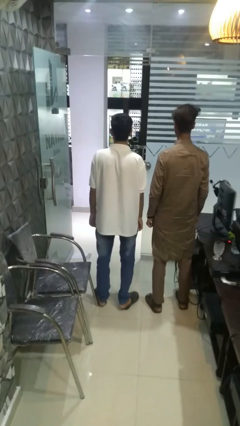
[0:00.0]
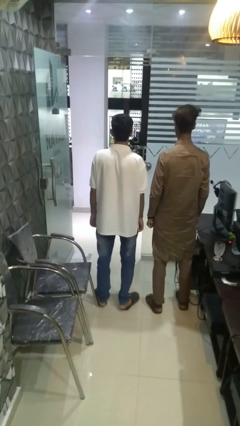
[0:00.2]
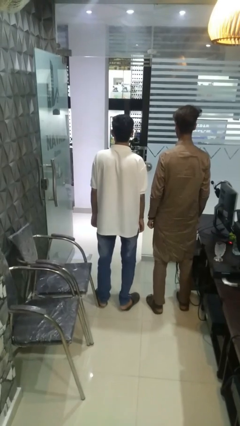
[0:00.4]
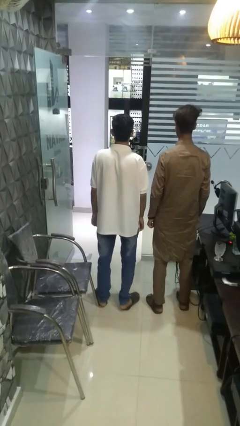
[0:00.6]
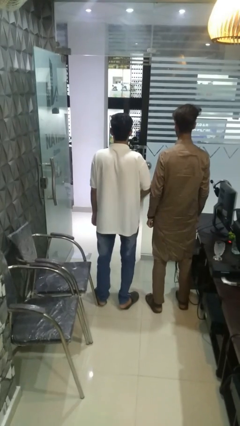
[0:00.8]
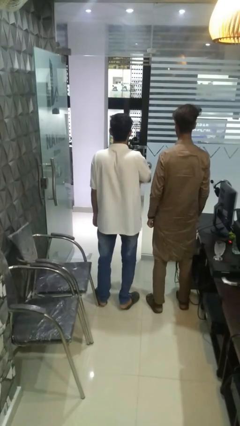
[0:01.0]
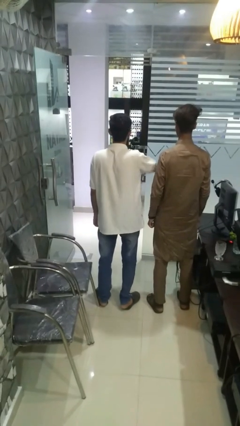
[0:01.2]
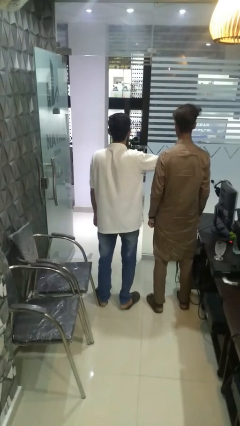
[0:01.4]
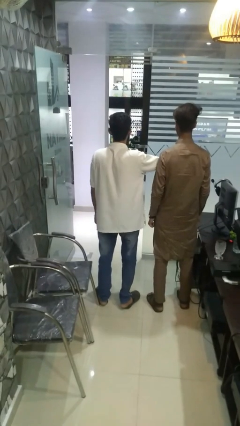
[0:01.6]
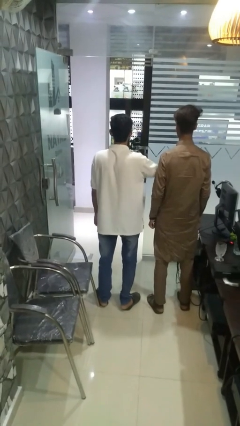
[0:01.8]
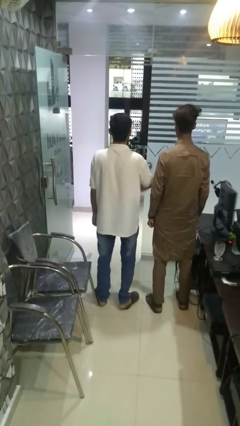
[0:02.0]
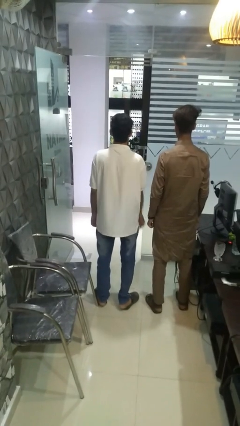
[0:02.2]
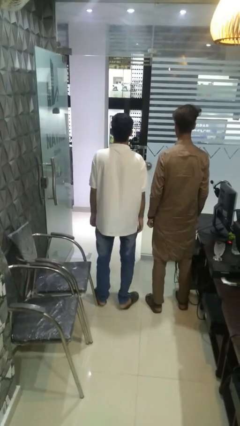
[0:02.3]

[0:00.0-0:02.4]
person nudges person with elbow

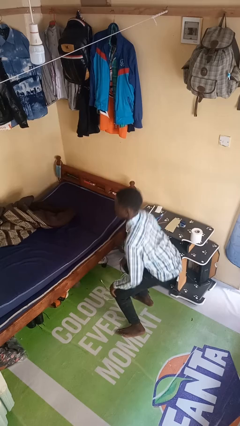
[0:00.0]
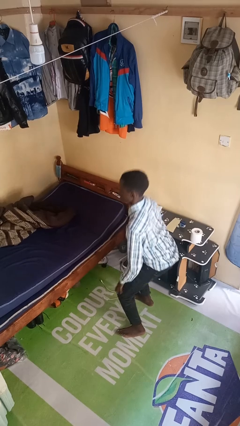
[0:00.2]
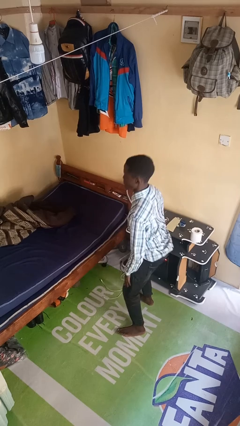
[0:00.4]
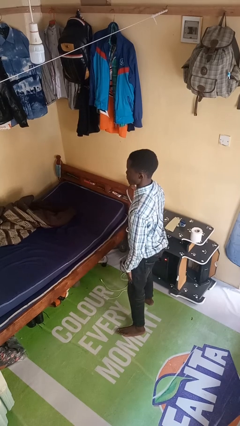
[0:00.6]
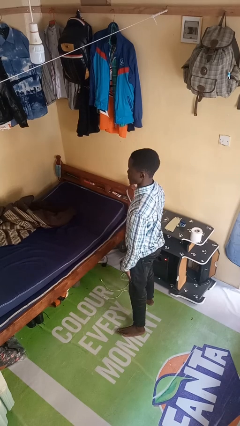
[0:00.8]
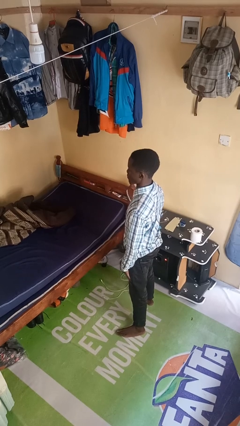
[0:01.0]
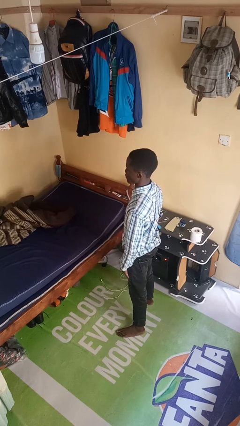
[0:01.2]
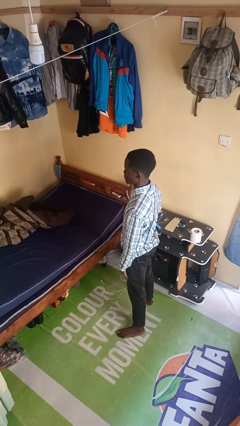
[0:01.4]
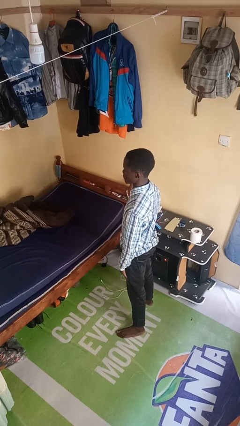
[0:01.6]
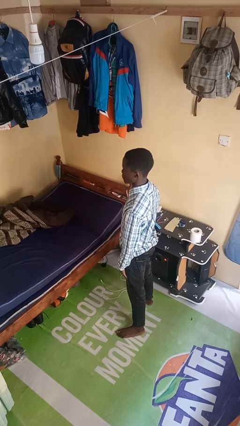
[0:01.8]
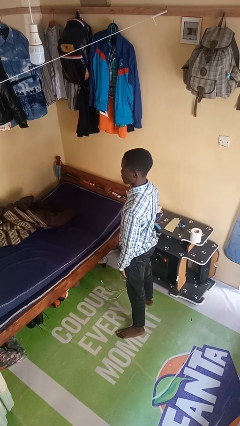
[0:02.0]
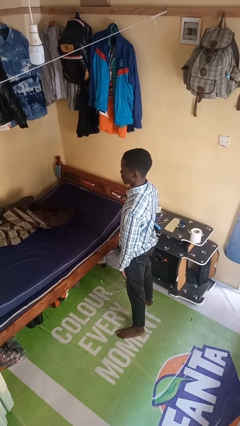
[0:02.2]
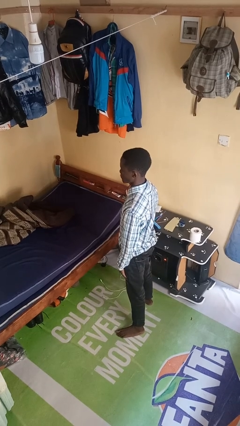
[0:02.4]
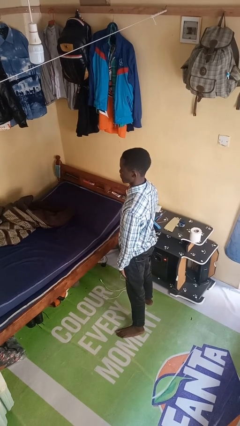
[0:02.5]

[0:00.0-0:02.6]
person stands up

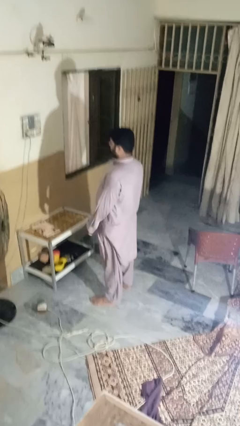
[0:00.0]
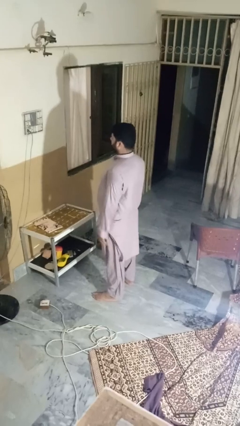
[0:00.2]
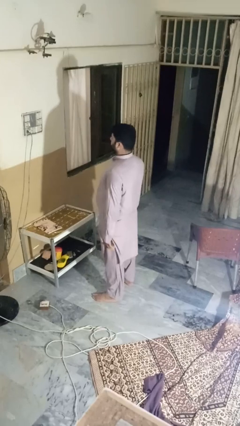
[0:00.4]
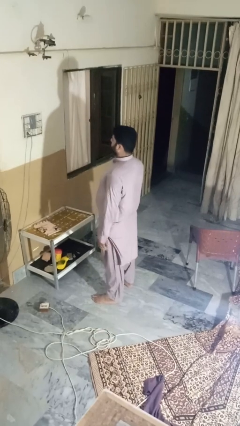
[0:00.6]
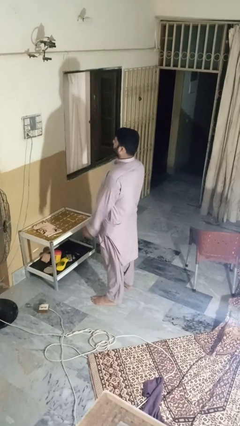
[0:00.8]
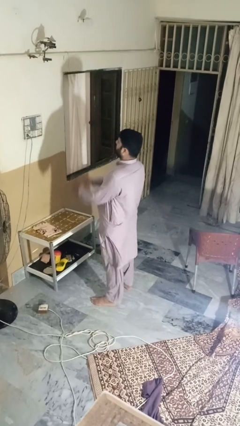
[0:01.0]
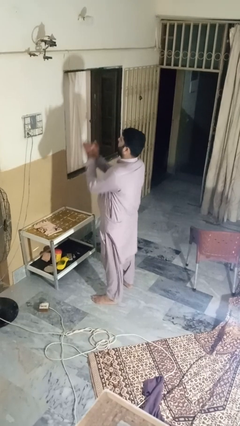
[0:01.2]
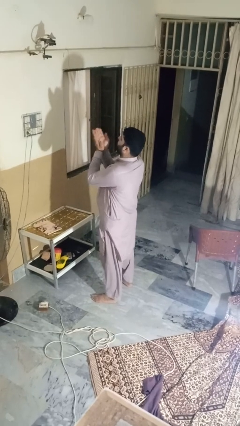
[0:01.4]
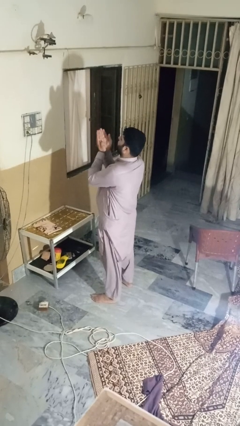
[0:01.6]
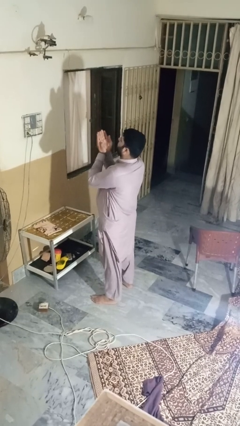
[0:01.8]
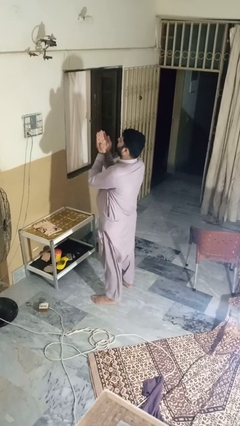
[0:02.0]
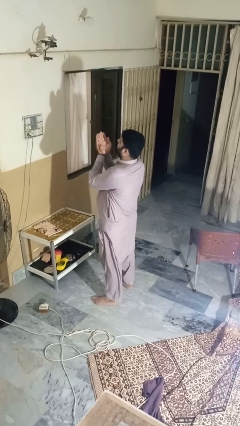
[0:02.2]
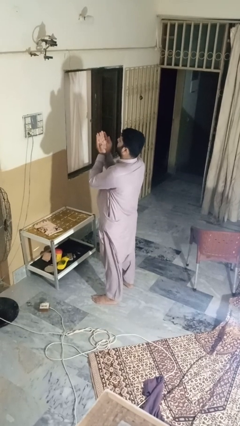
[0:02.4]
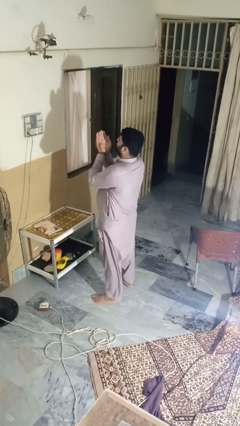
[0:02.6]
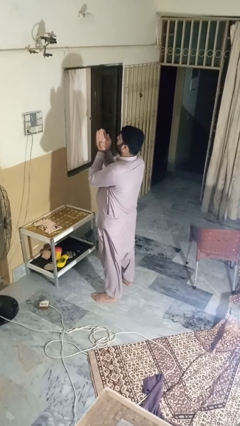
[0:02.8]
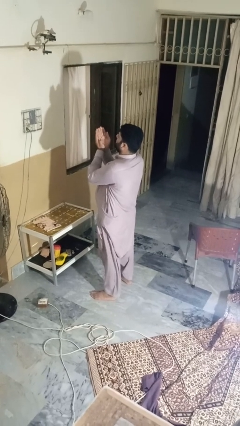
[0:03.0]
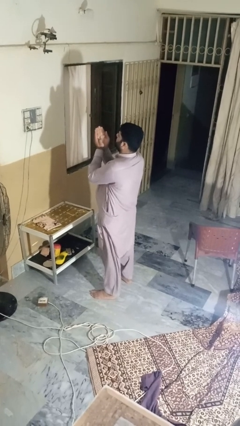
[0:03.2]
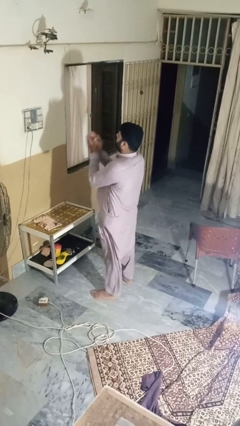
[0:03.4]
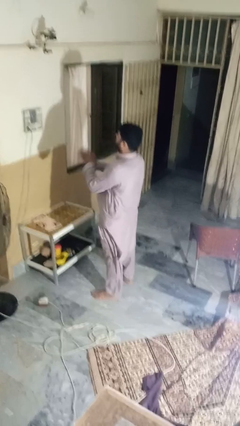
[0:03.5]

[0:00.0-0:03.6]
person prays

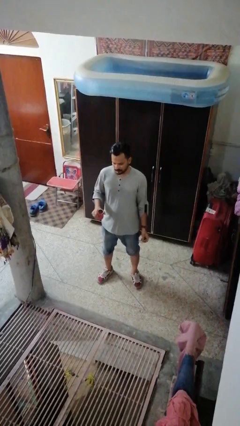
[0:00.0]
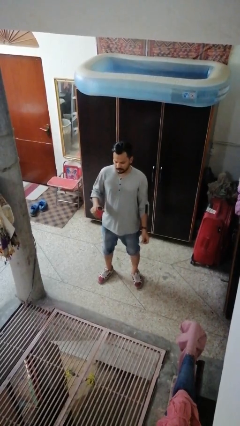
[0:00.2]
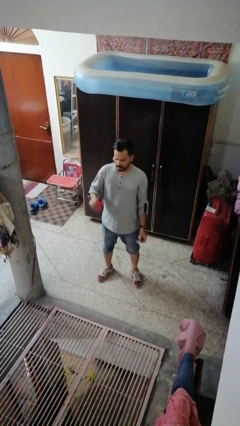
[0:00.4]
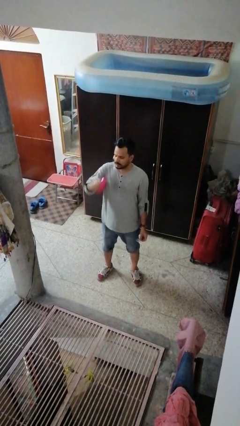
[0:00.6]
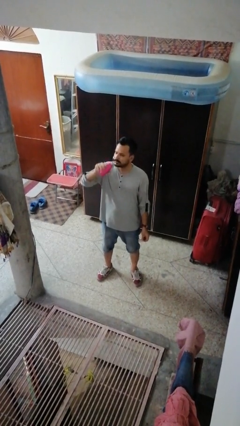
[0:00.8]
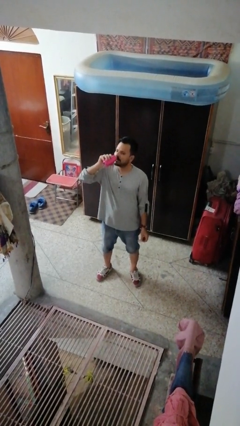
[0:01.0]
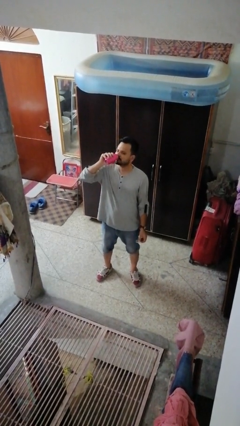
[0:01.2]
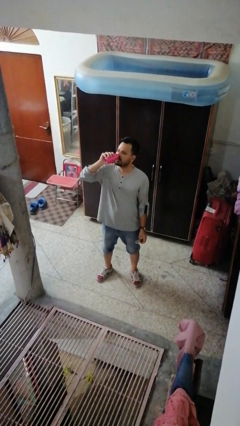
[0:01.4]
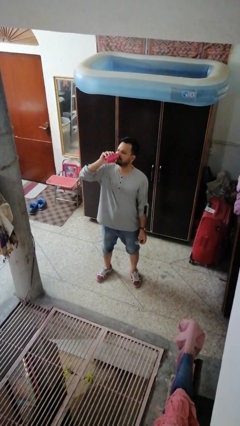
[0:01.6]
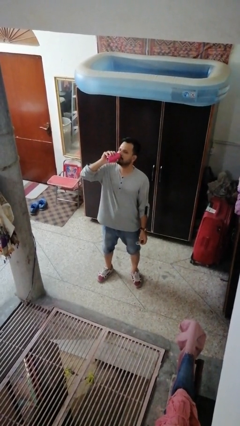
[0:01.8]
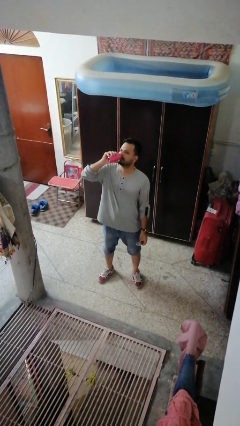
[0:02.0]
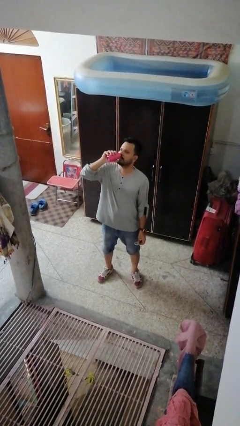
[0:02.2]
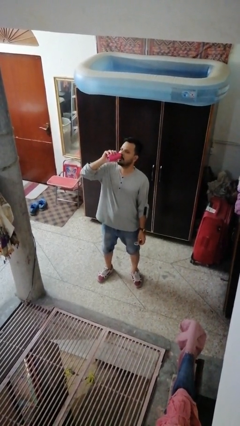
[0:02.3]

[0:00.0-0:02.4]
person drinks from beverage can

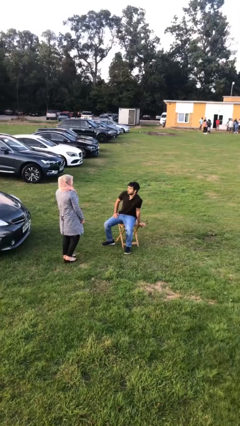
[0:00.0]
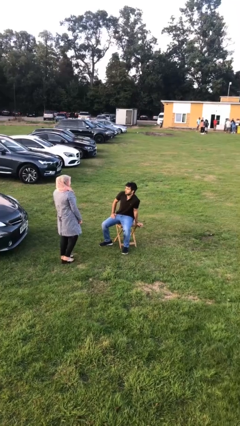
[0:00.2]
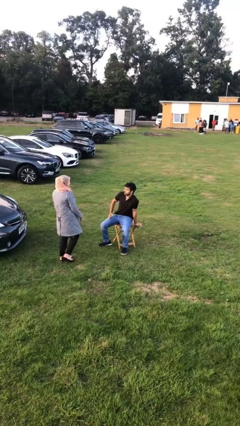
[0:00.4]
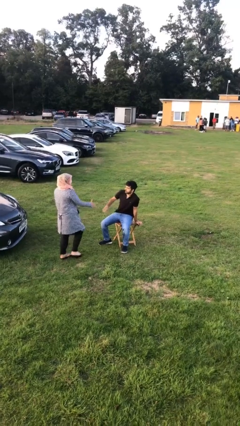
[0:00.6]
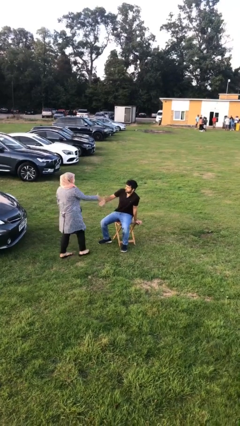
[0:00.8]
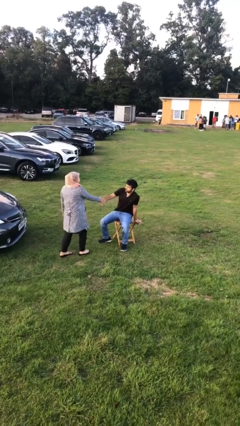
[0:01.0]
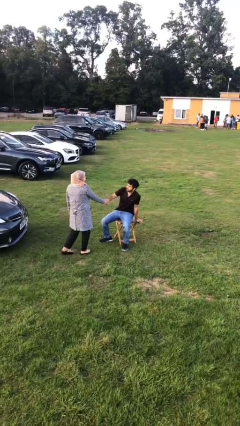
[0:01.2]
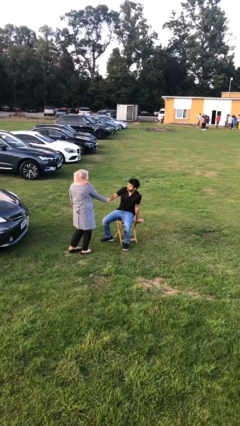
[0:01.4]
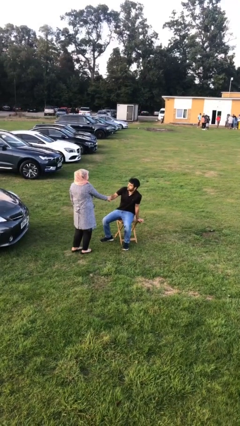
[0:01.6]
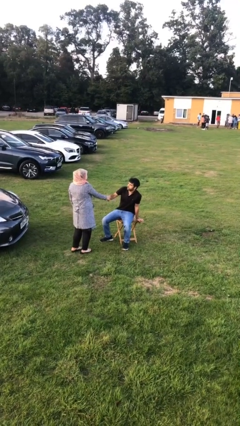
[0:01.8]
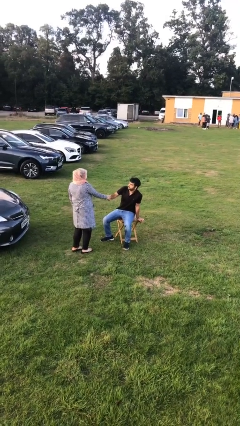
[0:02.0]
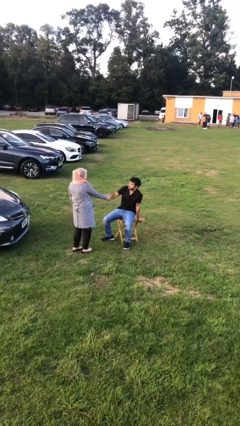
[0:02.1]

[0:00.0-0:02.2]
person shakes hand

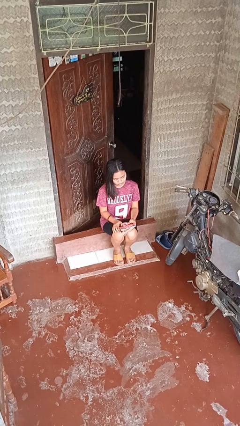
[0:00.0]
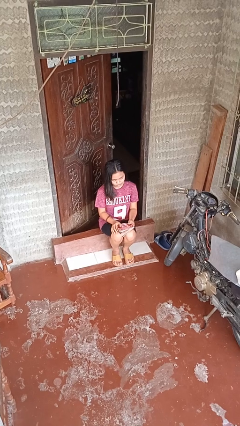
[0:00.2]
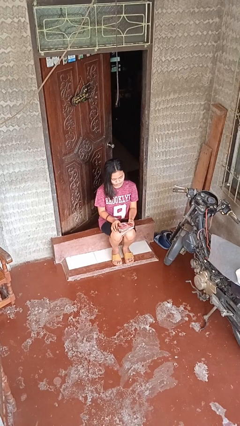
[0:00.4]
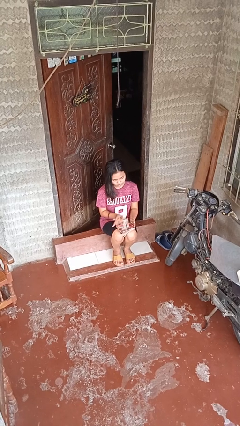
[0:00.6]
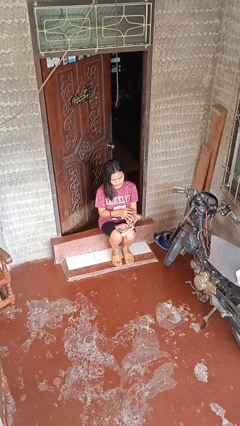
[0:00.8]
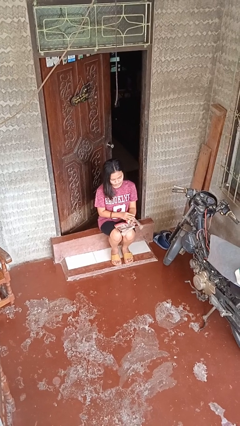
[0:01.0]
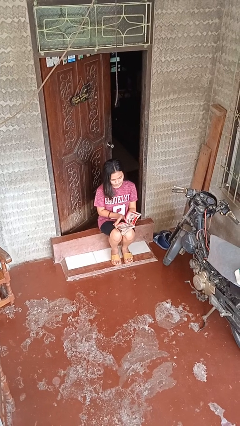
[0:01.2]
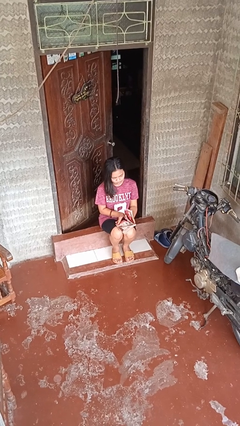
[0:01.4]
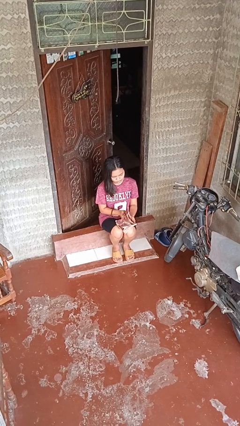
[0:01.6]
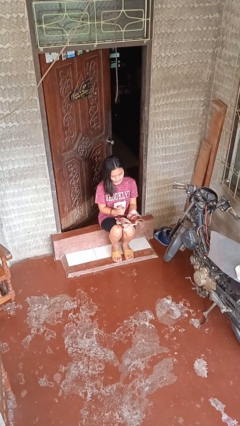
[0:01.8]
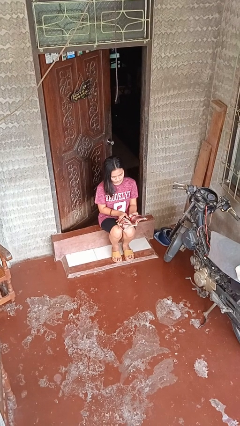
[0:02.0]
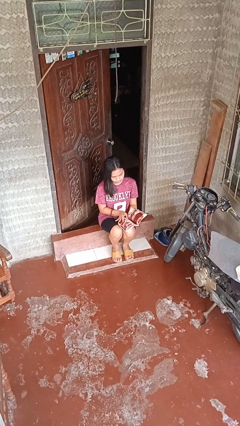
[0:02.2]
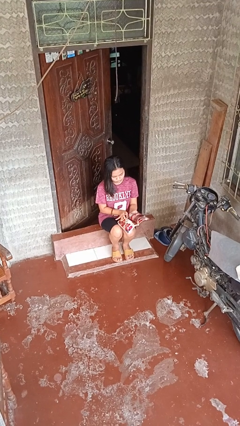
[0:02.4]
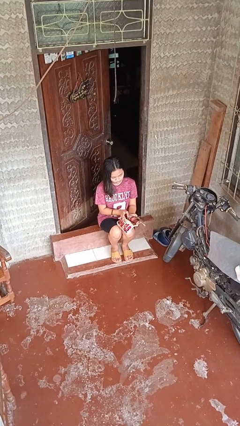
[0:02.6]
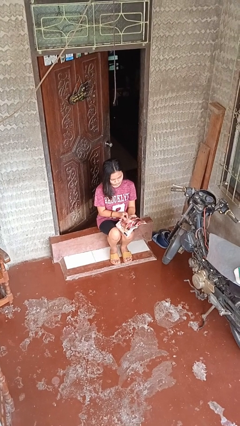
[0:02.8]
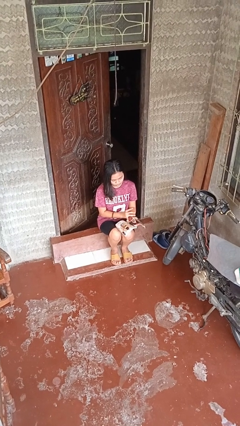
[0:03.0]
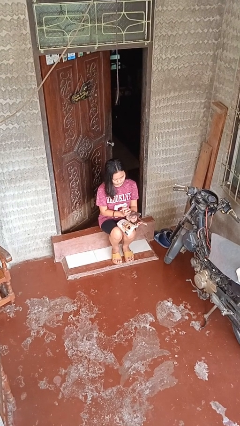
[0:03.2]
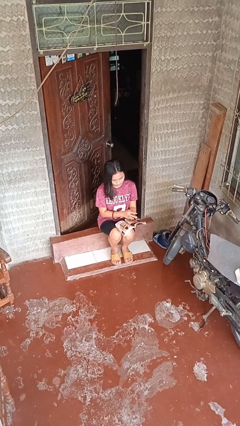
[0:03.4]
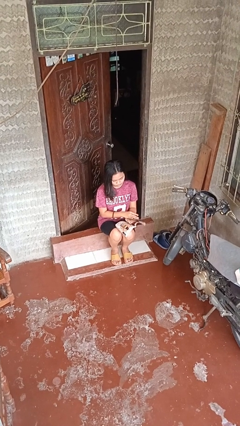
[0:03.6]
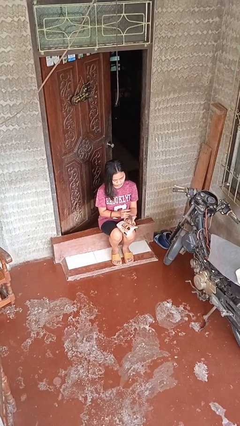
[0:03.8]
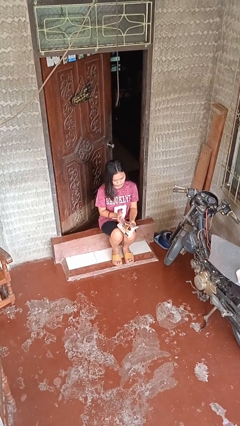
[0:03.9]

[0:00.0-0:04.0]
person reads magazine

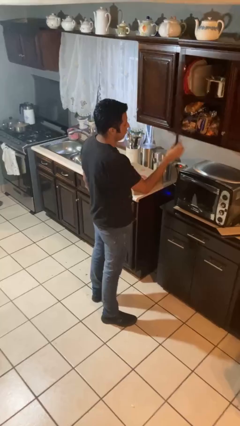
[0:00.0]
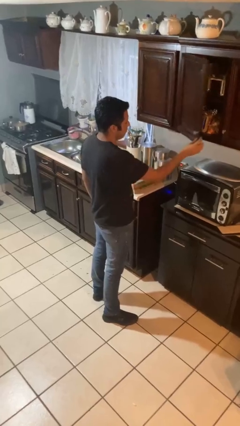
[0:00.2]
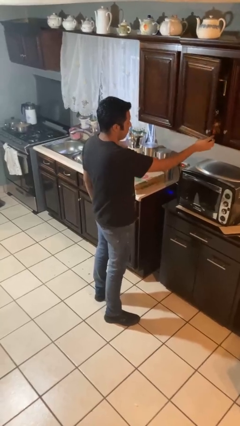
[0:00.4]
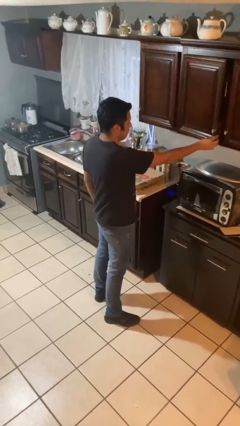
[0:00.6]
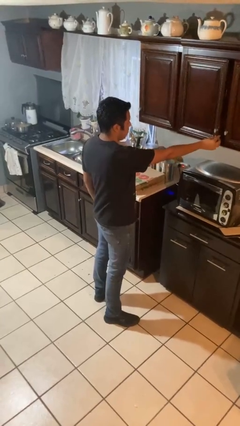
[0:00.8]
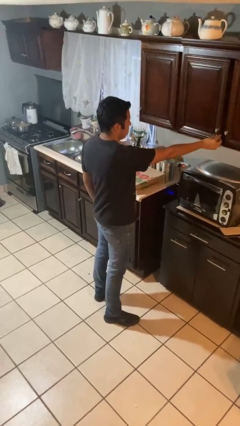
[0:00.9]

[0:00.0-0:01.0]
person closes cabinet
